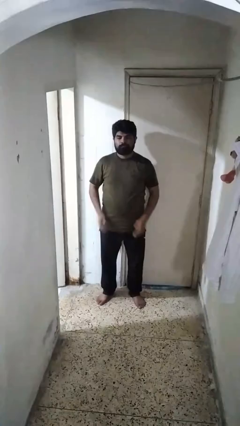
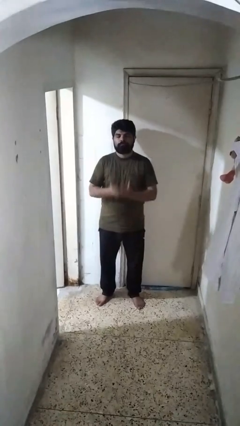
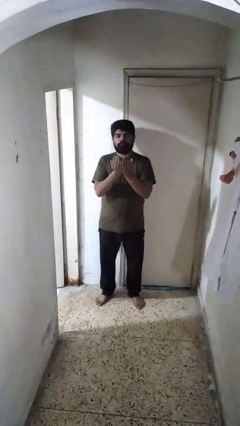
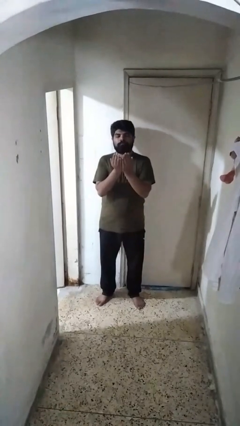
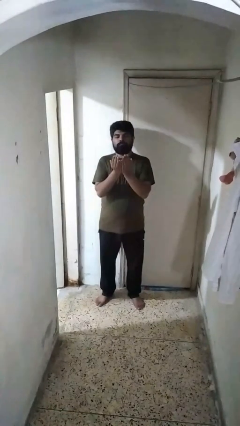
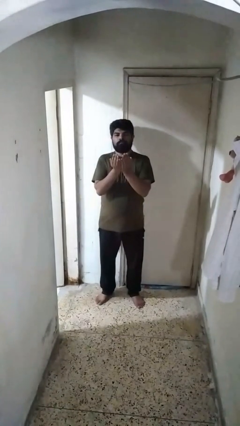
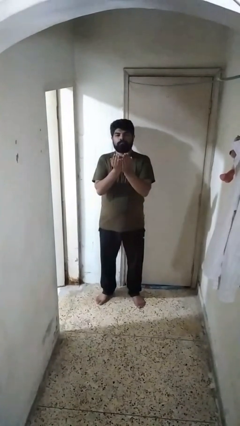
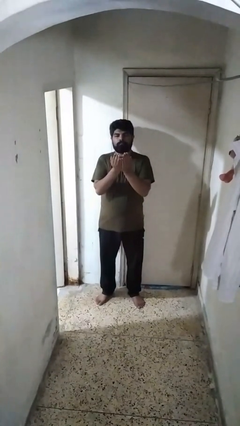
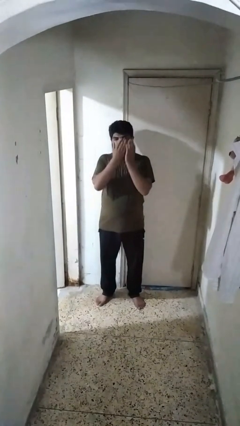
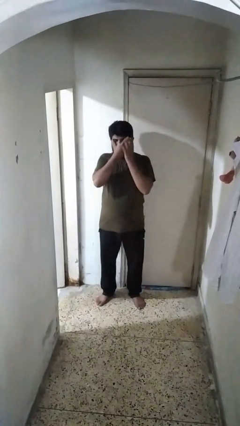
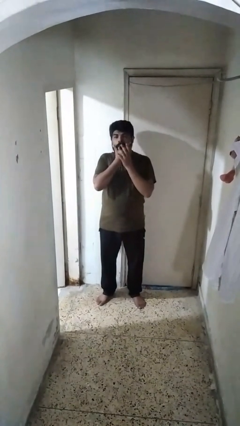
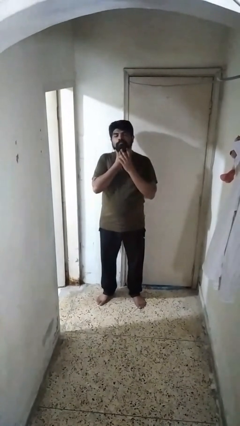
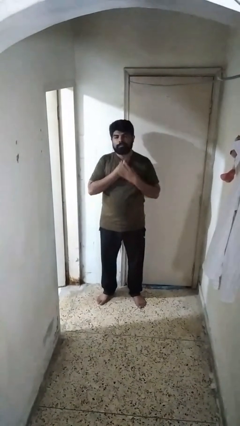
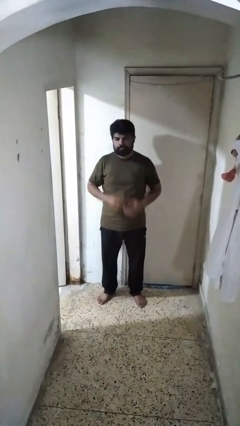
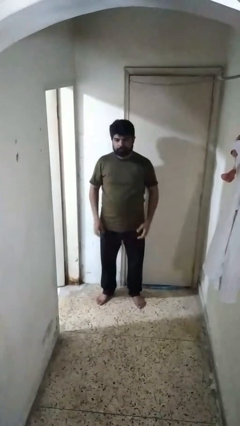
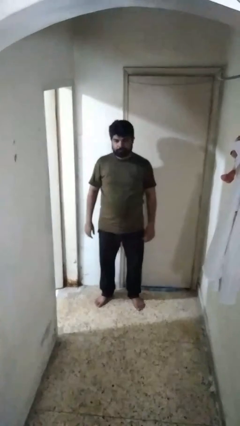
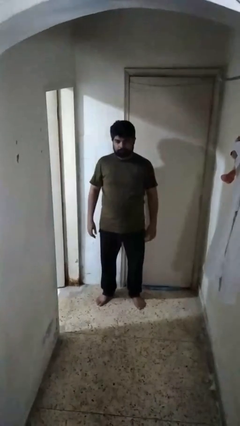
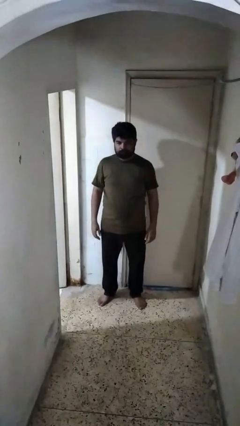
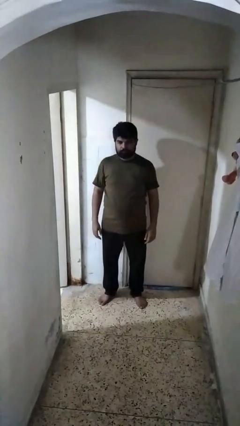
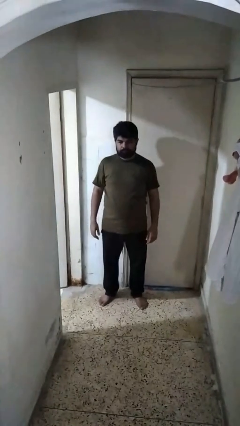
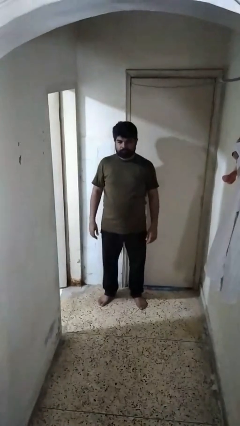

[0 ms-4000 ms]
person prays

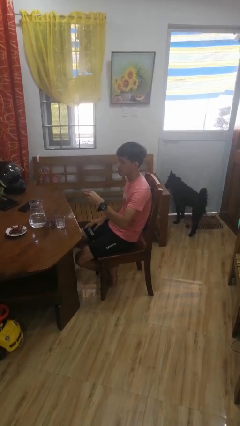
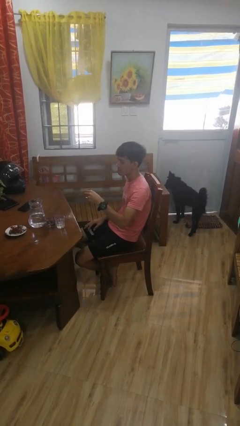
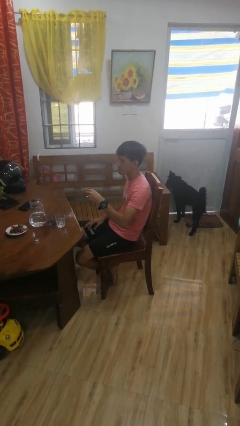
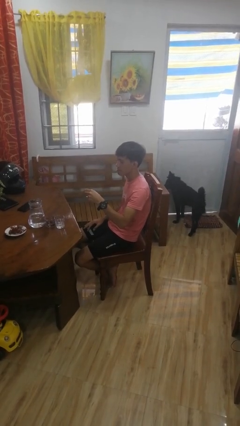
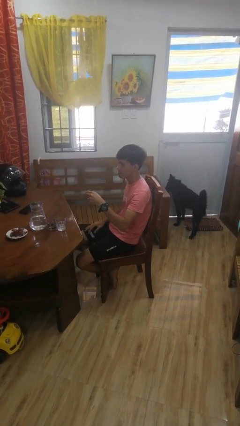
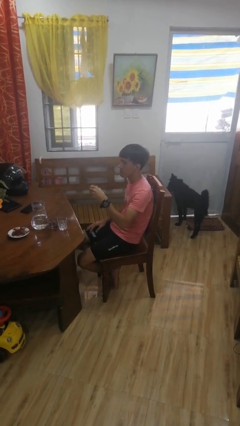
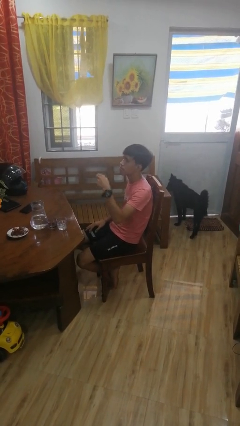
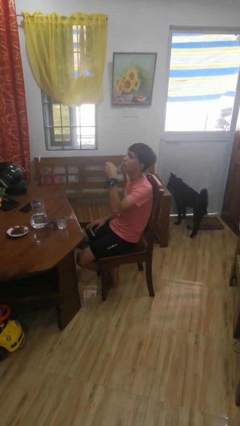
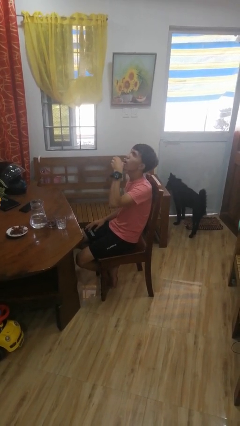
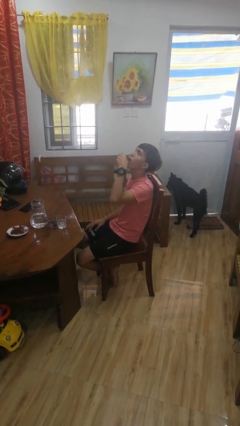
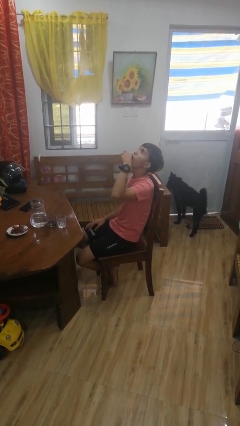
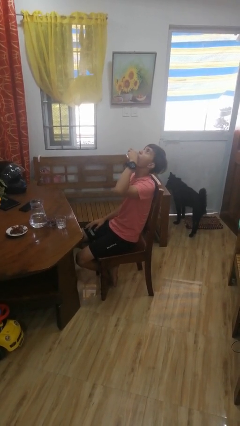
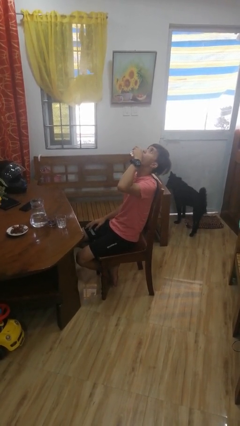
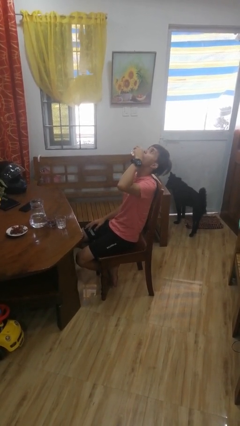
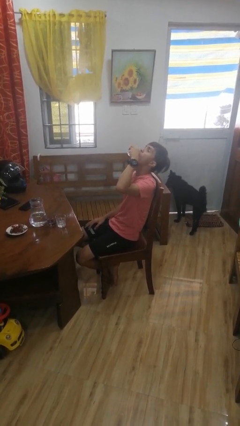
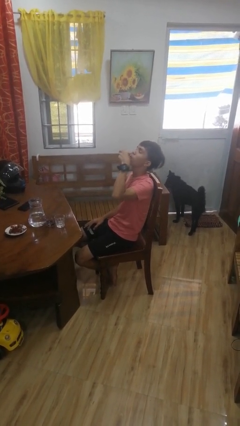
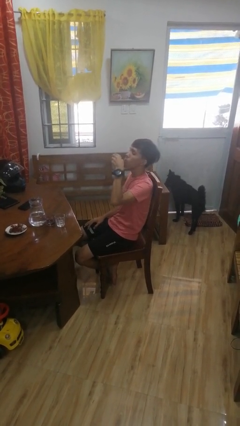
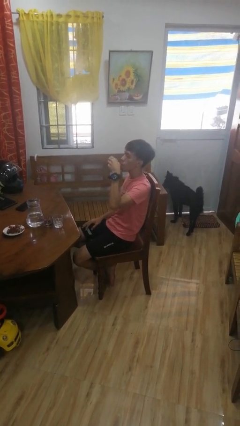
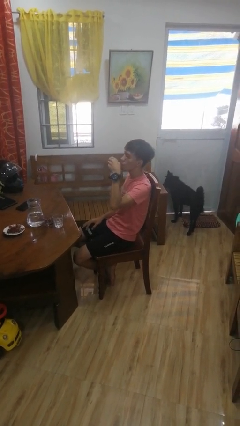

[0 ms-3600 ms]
person drinks from shotglass

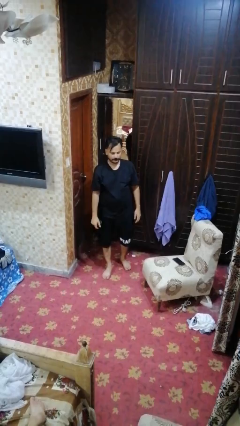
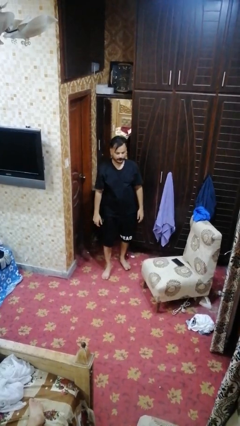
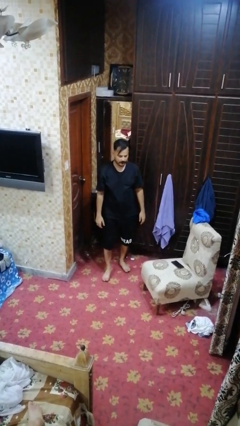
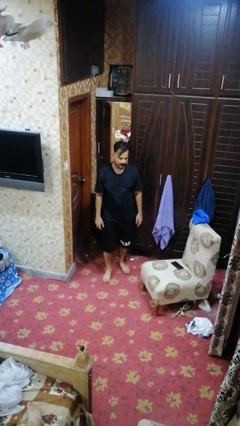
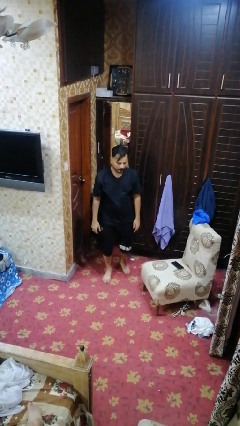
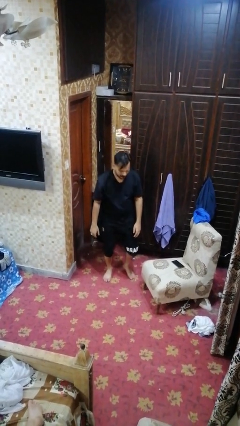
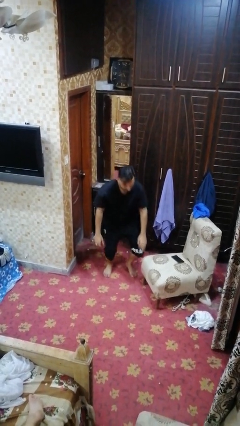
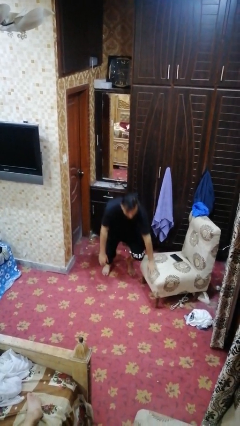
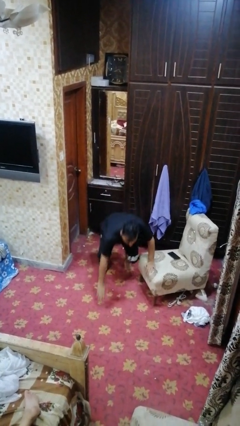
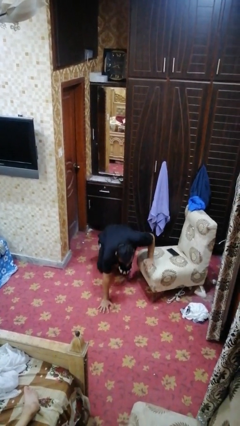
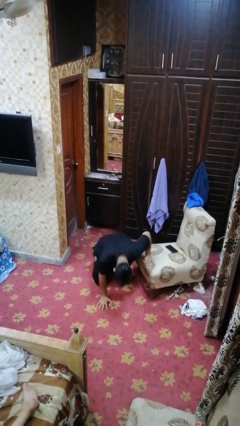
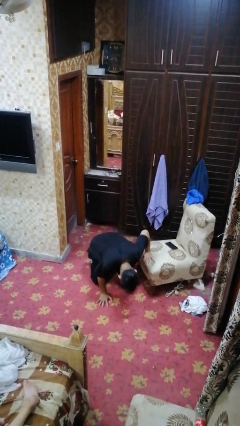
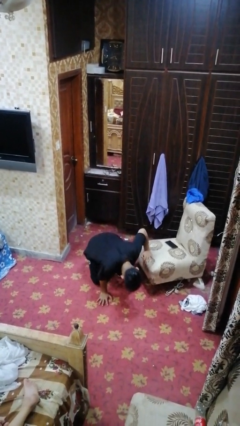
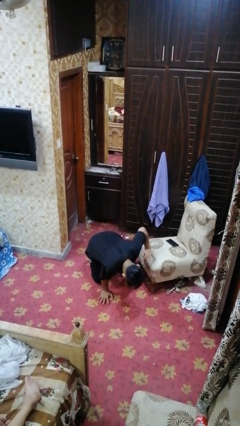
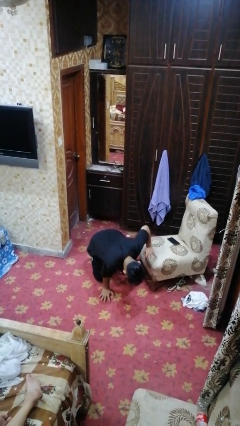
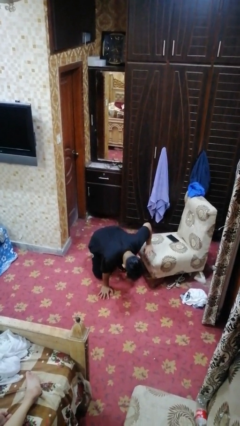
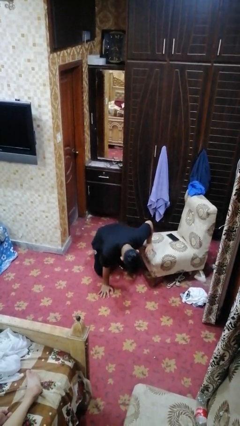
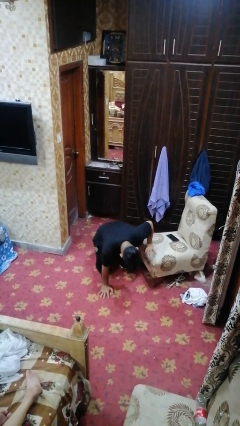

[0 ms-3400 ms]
person trips on object on floor

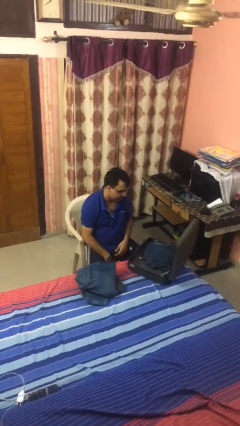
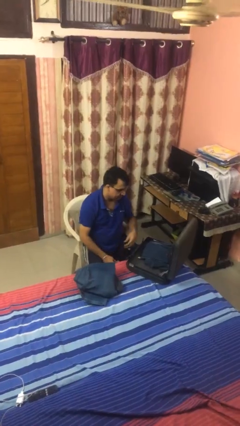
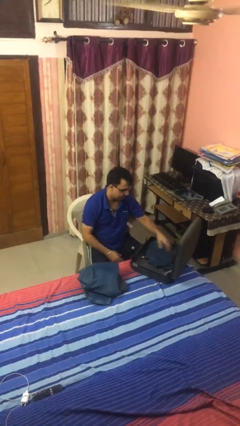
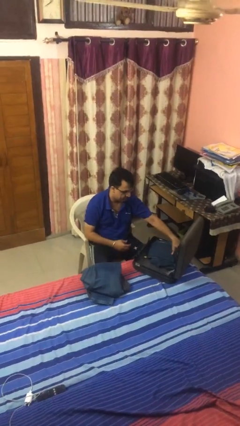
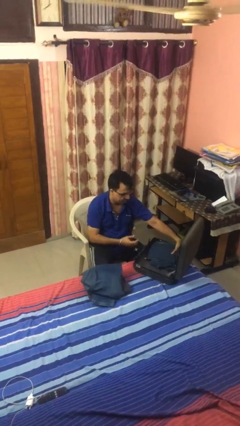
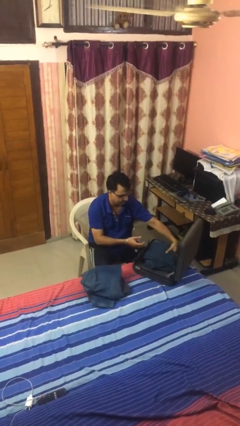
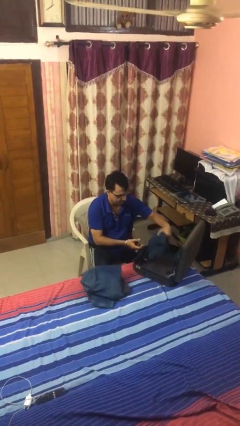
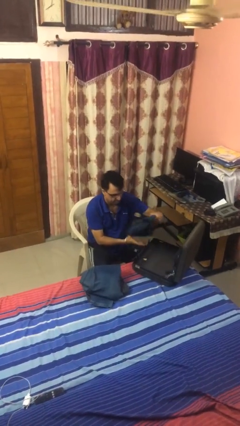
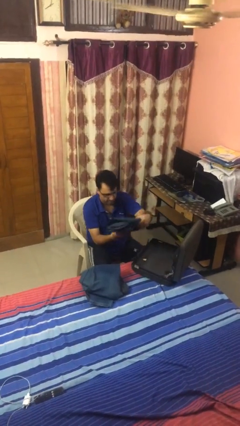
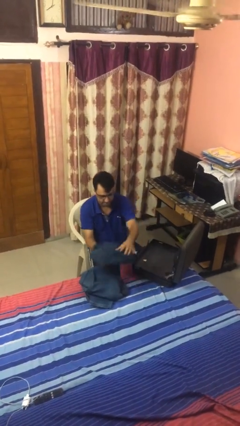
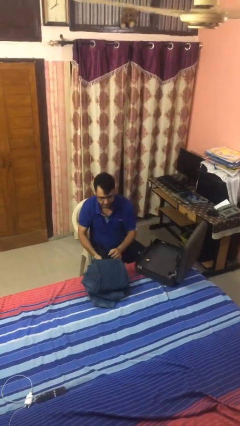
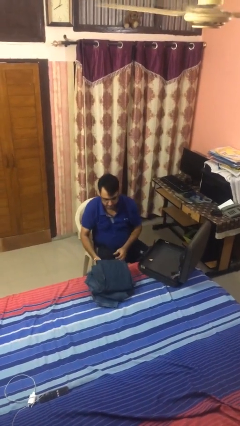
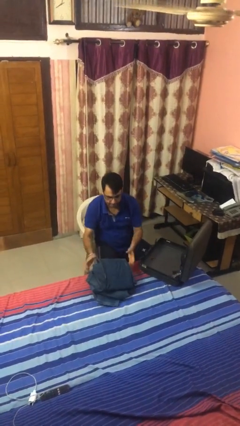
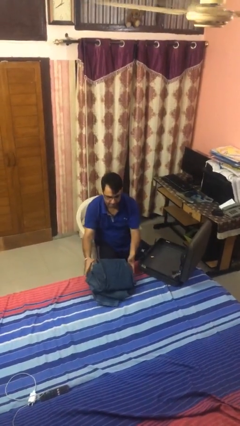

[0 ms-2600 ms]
person unloads clothes from suitcase

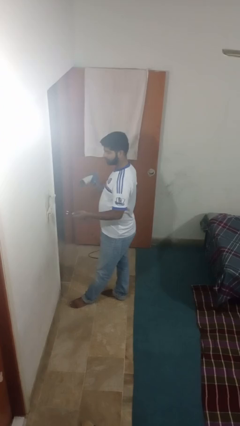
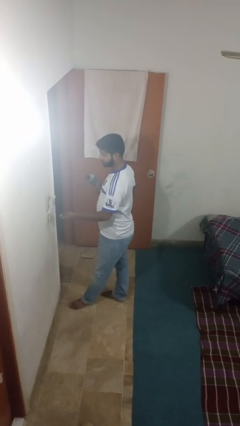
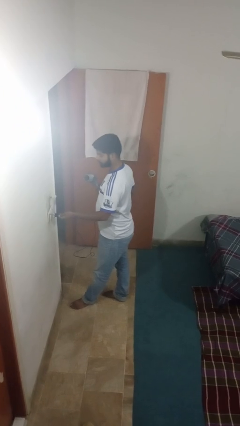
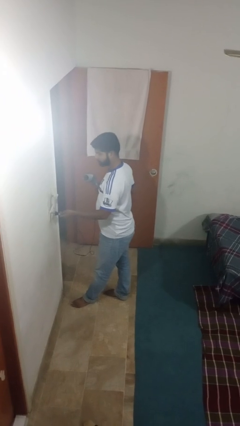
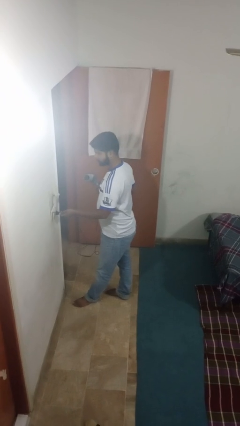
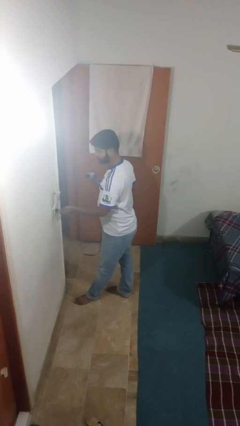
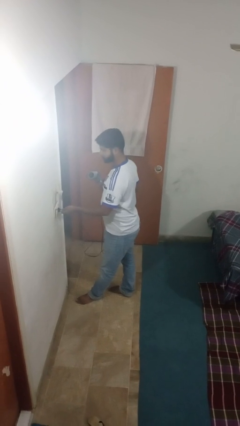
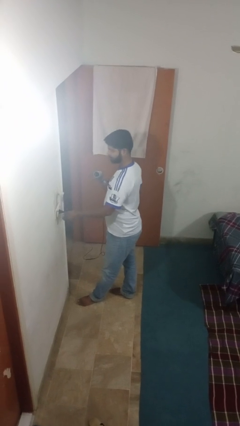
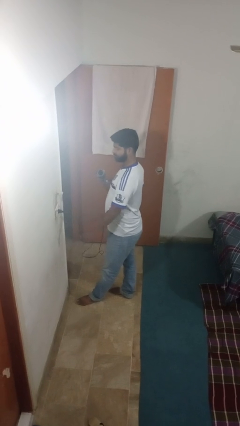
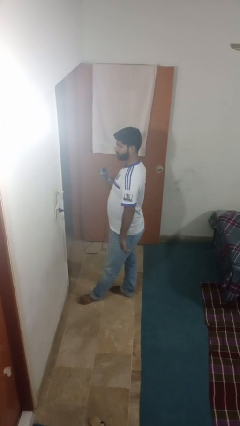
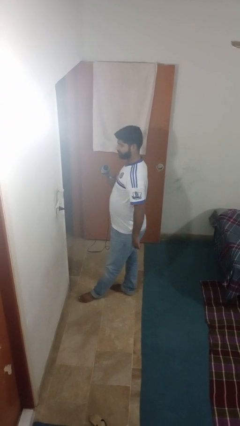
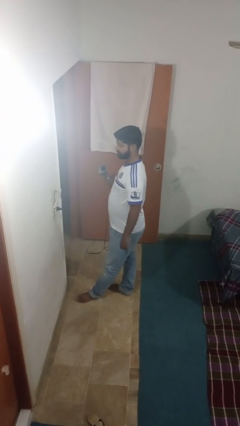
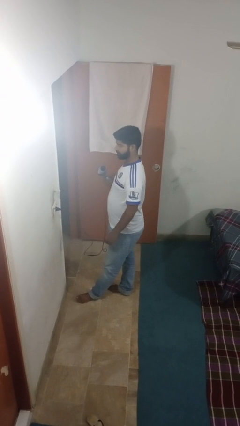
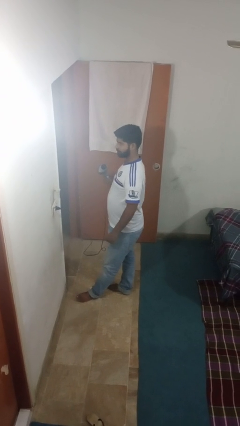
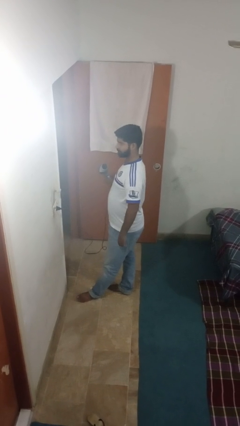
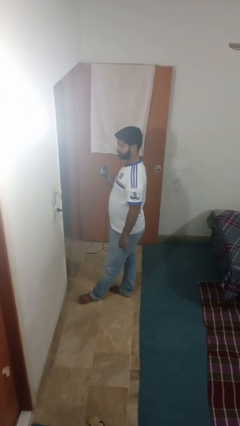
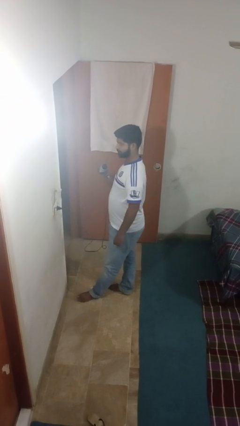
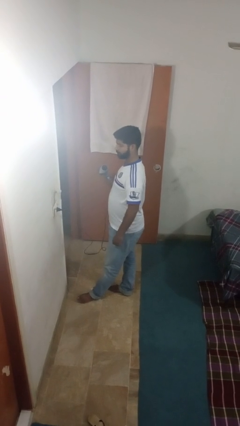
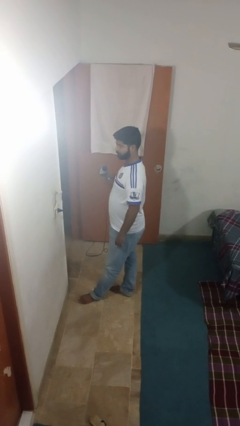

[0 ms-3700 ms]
person plugs into electrical socket

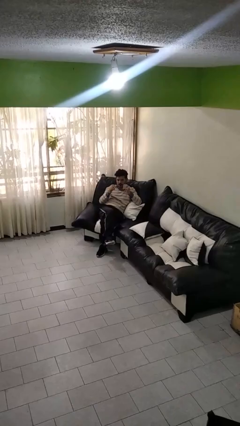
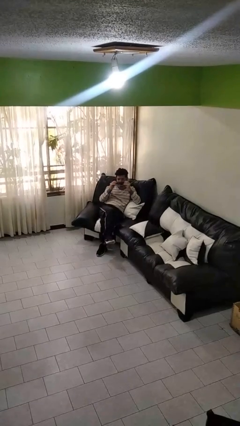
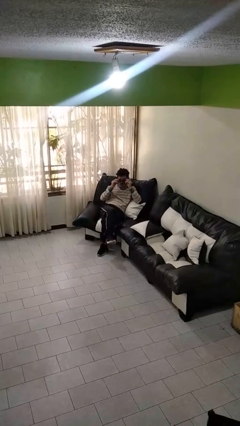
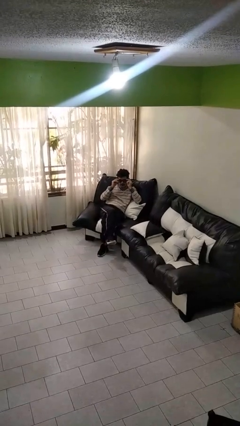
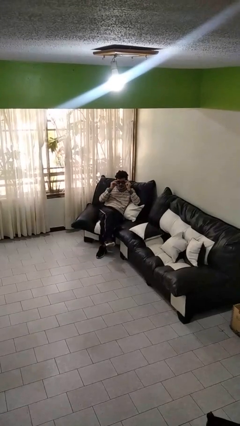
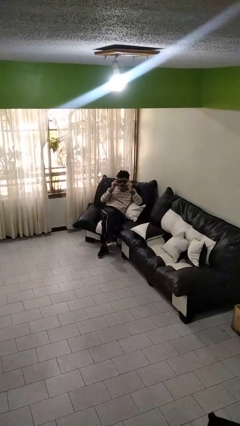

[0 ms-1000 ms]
person puts on sunglasses
